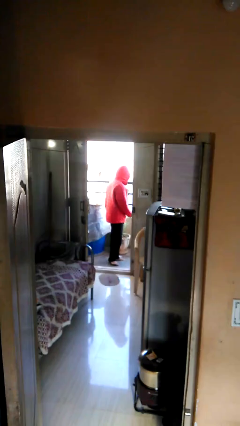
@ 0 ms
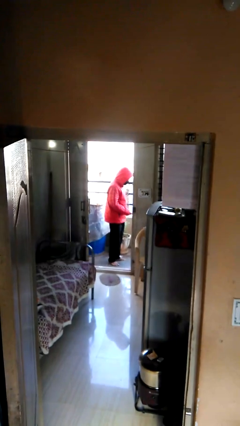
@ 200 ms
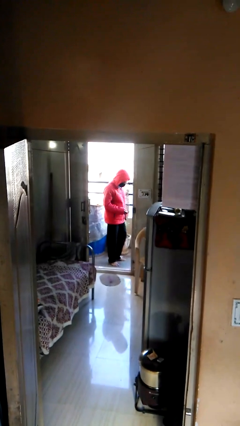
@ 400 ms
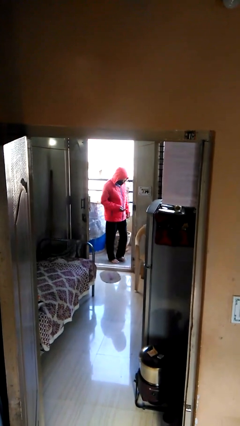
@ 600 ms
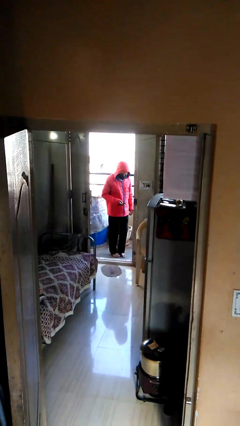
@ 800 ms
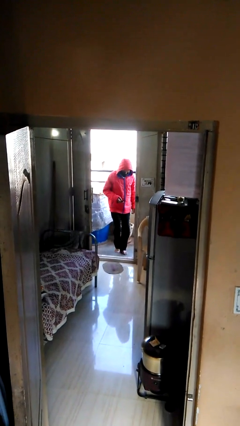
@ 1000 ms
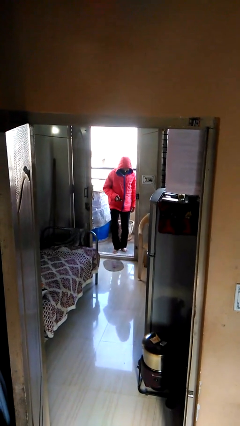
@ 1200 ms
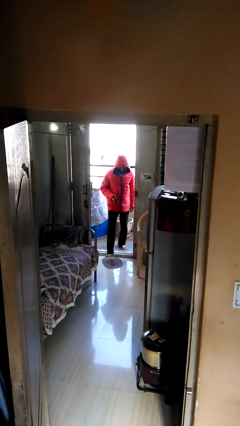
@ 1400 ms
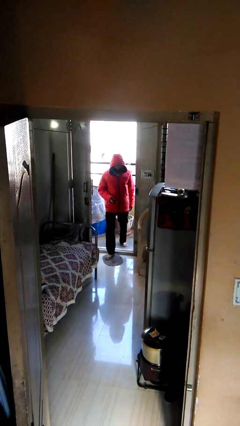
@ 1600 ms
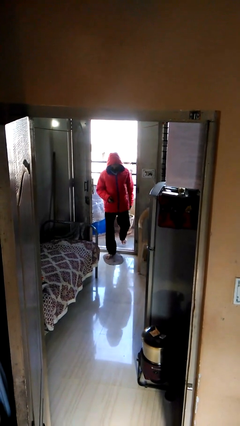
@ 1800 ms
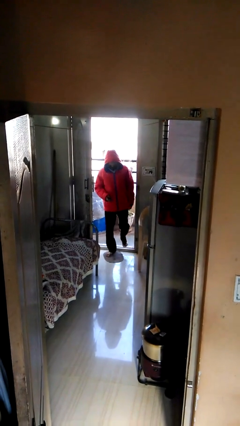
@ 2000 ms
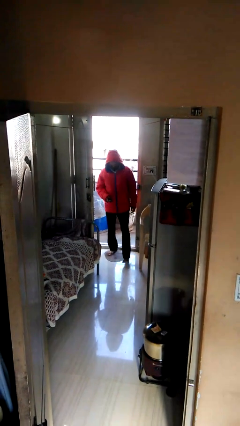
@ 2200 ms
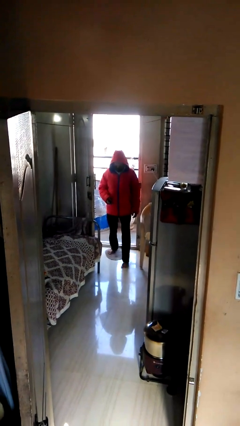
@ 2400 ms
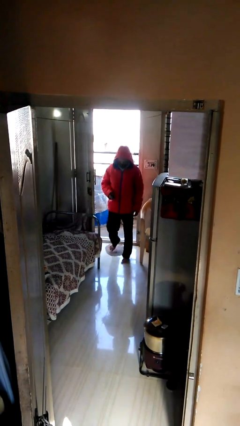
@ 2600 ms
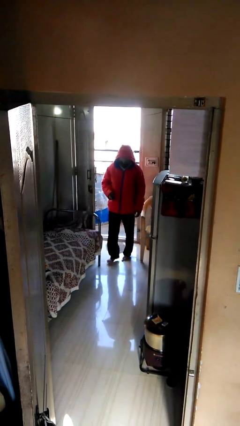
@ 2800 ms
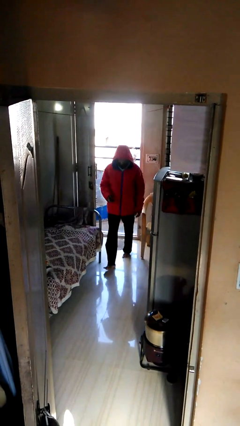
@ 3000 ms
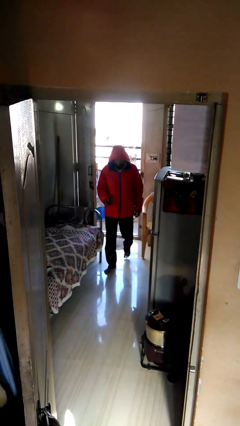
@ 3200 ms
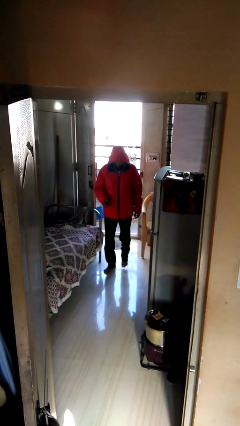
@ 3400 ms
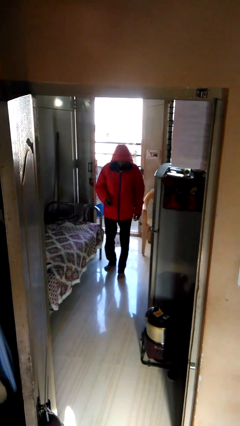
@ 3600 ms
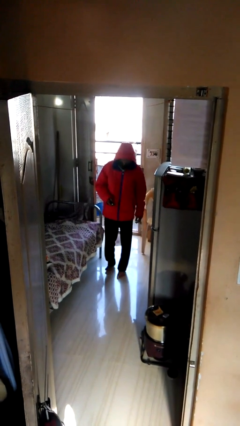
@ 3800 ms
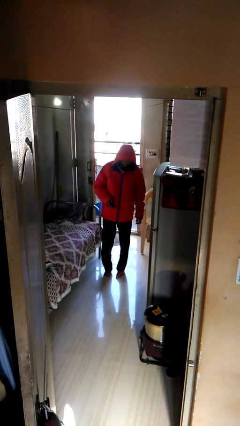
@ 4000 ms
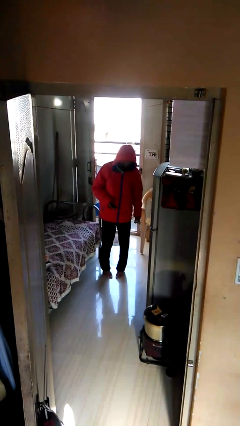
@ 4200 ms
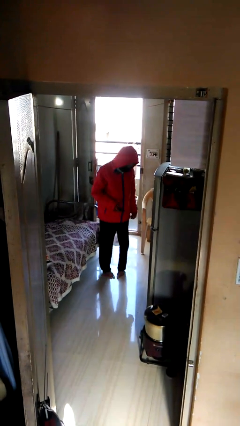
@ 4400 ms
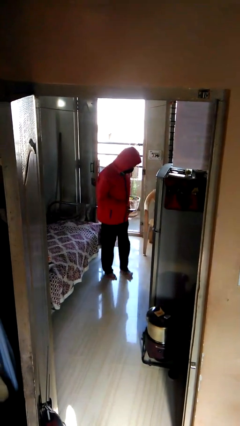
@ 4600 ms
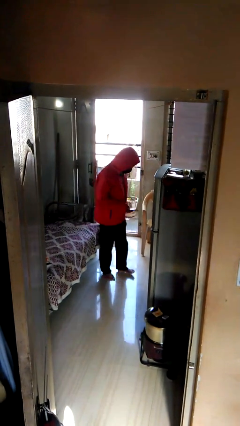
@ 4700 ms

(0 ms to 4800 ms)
person enters scene through structure

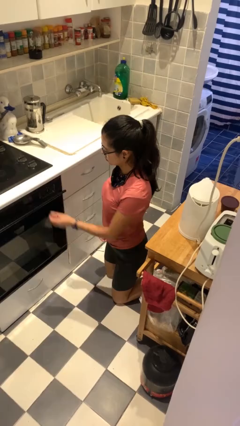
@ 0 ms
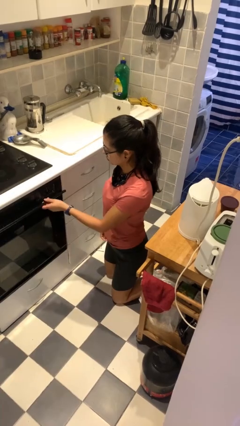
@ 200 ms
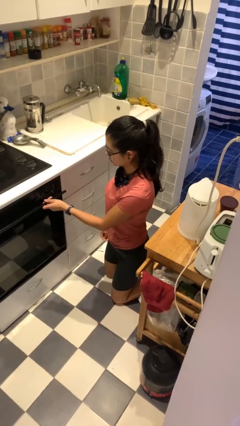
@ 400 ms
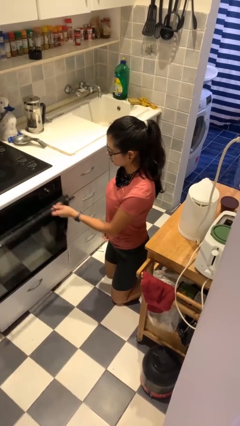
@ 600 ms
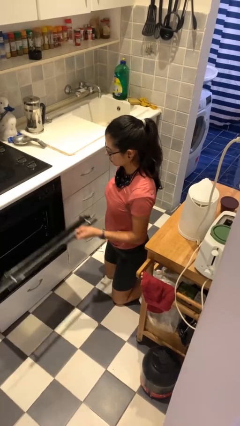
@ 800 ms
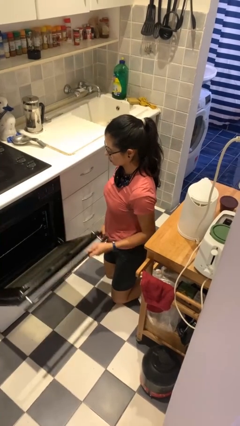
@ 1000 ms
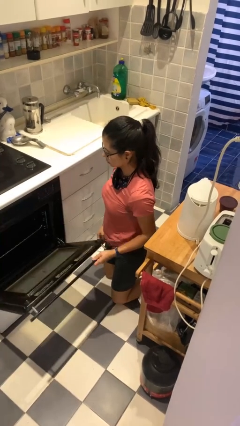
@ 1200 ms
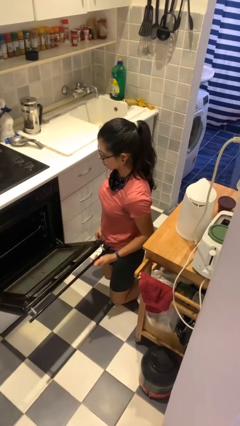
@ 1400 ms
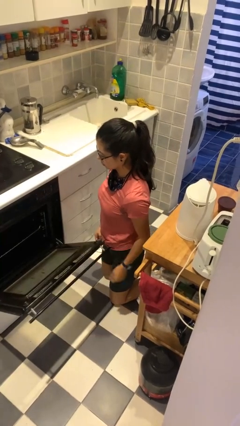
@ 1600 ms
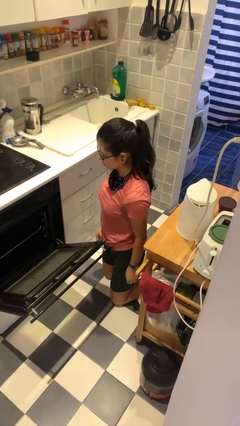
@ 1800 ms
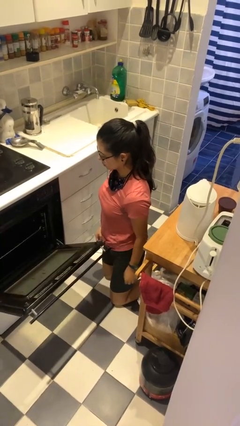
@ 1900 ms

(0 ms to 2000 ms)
person opens oven door

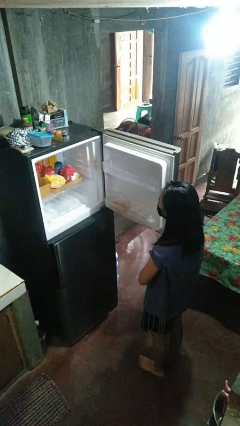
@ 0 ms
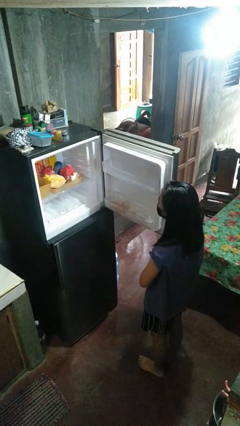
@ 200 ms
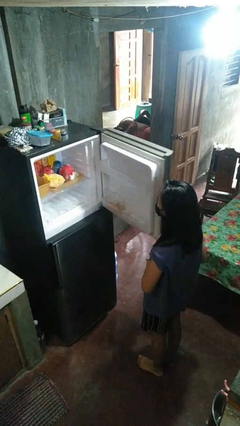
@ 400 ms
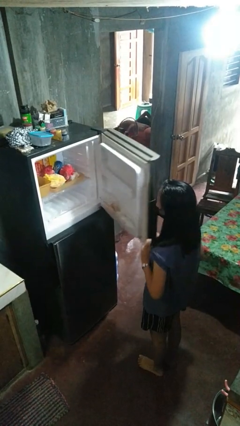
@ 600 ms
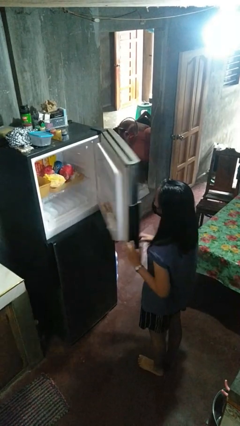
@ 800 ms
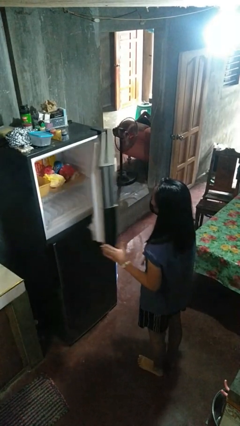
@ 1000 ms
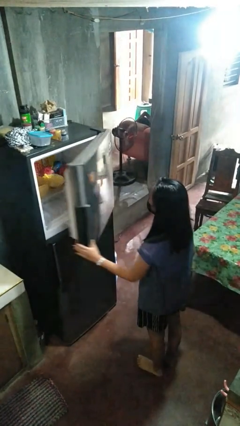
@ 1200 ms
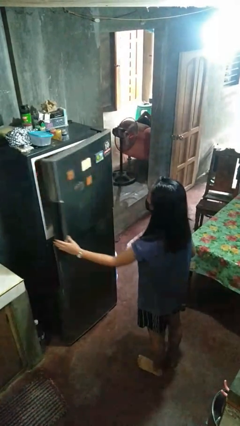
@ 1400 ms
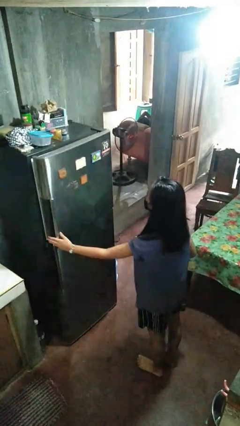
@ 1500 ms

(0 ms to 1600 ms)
person closes refrigerator

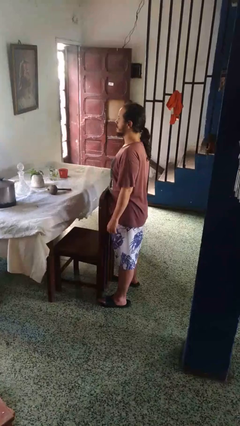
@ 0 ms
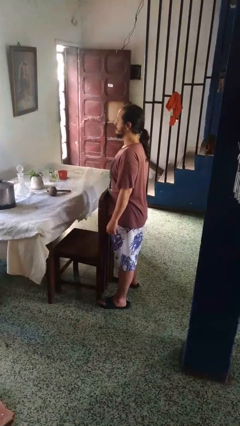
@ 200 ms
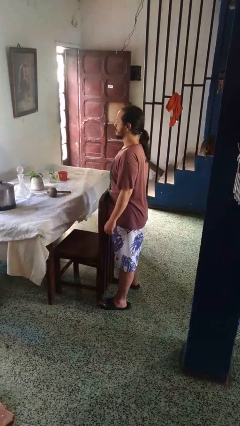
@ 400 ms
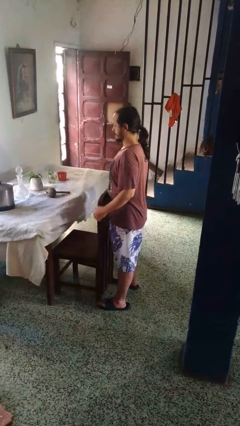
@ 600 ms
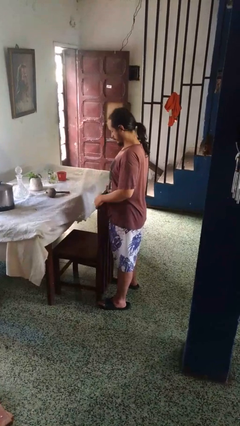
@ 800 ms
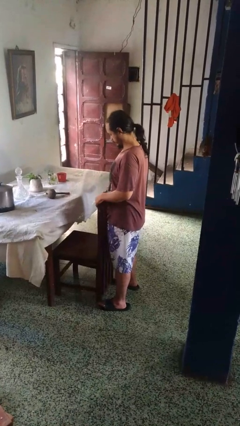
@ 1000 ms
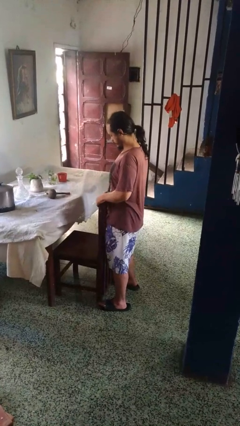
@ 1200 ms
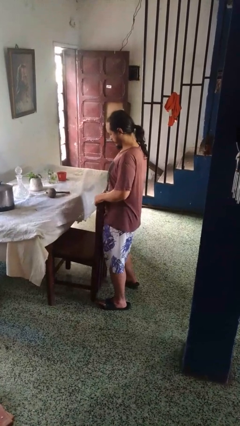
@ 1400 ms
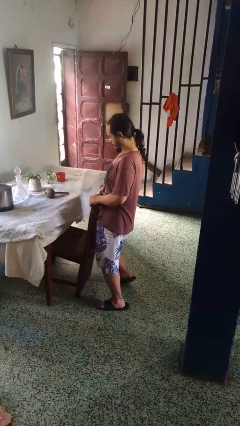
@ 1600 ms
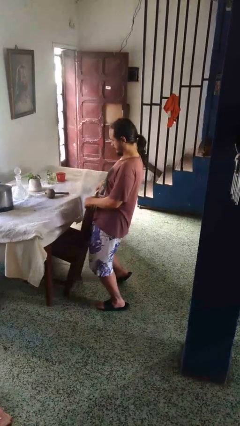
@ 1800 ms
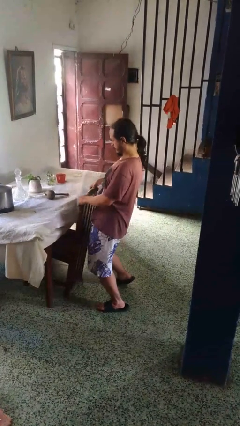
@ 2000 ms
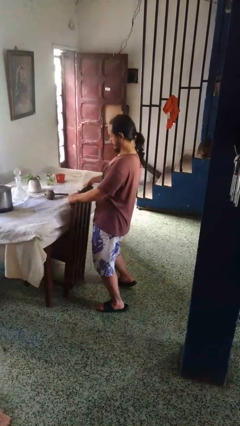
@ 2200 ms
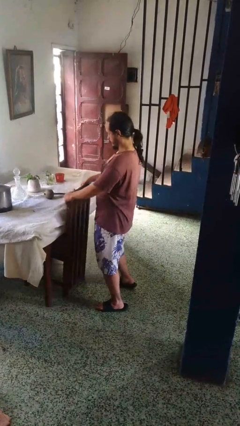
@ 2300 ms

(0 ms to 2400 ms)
person pushes in chair

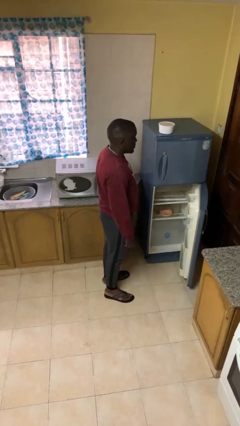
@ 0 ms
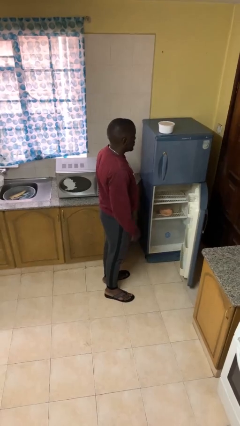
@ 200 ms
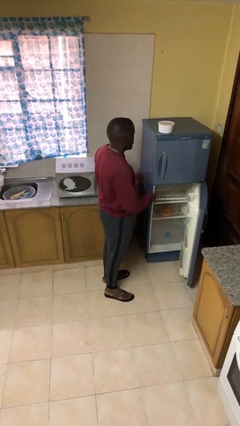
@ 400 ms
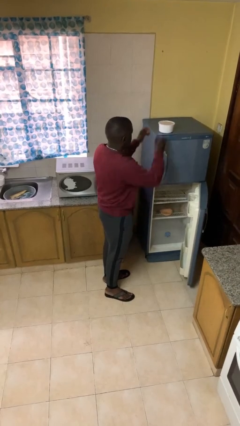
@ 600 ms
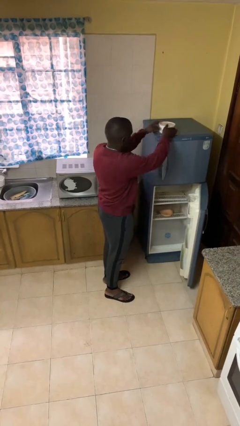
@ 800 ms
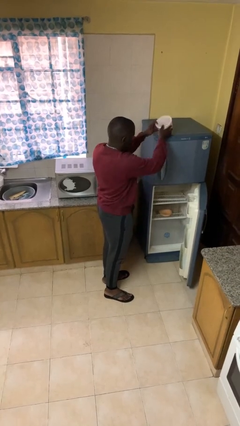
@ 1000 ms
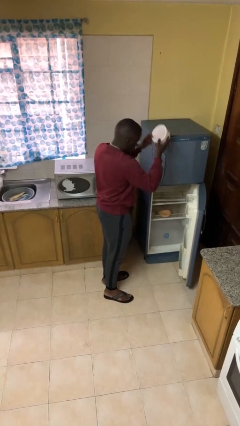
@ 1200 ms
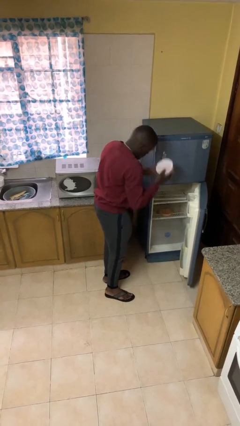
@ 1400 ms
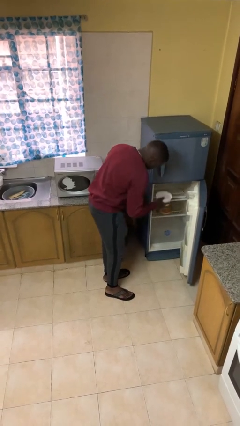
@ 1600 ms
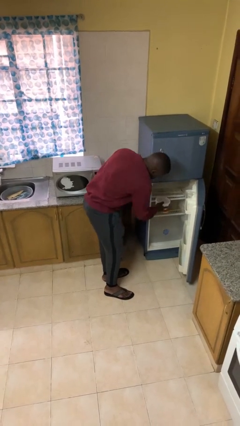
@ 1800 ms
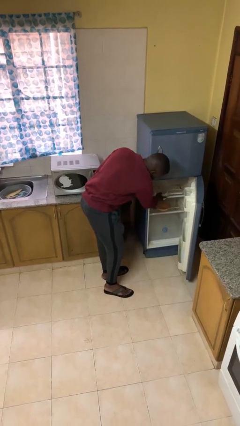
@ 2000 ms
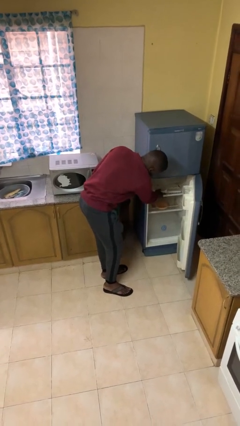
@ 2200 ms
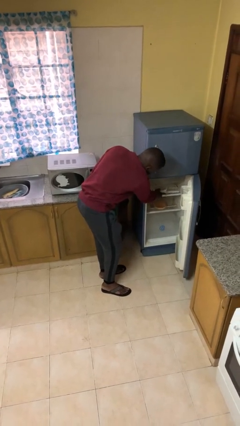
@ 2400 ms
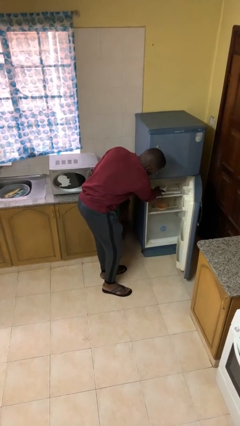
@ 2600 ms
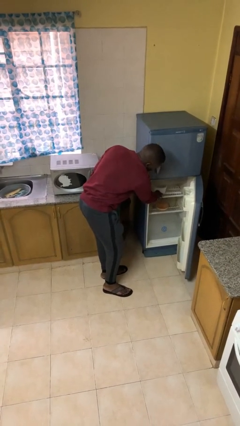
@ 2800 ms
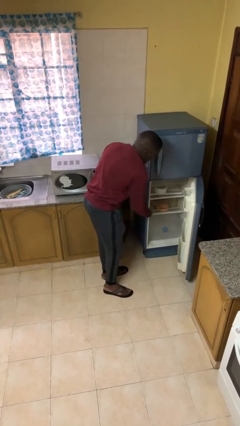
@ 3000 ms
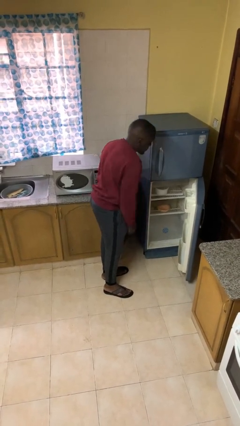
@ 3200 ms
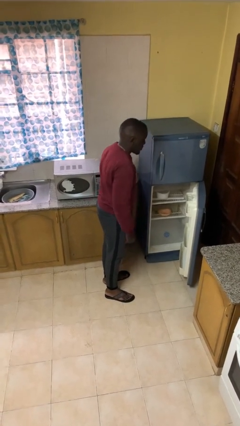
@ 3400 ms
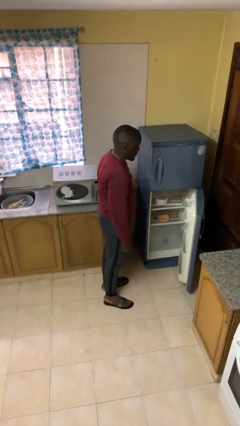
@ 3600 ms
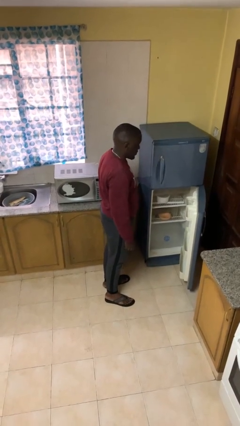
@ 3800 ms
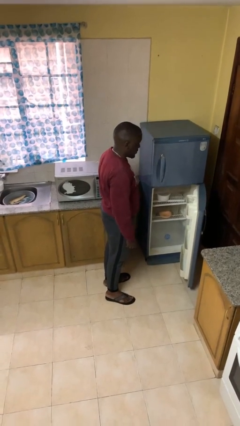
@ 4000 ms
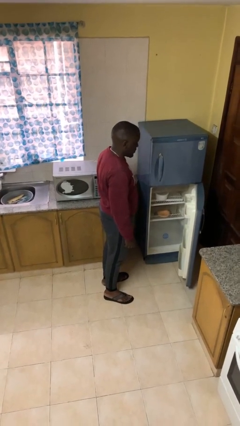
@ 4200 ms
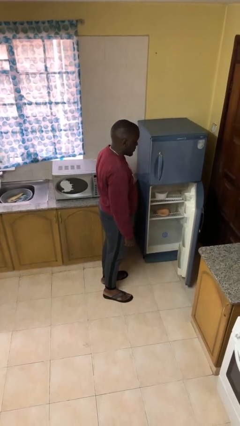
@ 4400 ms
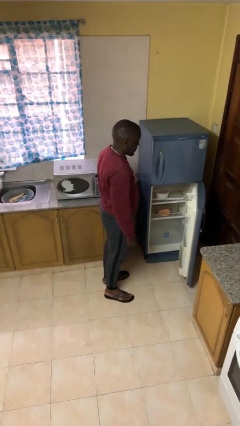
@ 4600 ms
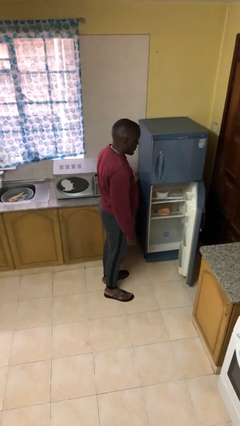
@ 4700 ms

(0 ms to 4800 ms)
person puts object into refrigerator

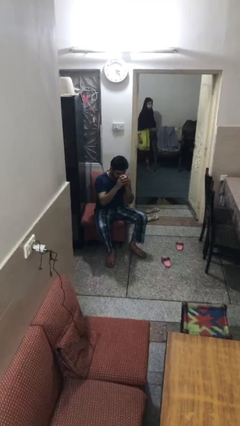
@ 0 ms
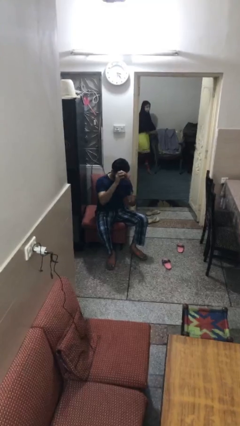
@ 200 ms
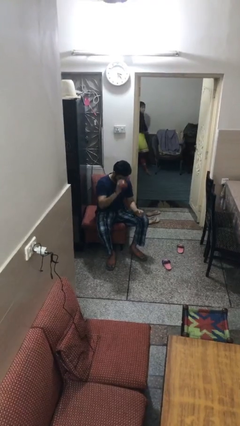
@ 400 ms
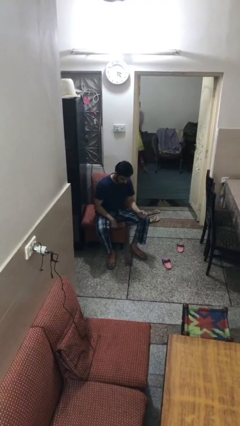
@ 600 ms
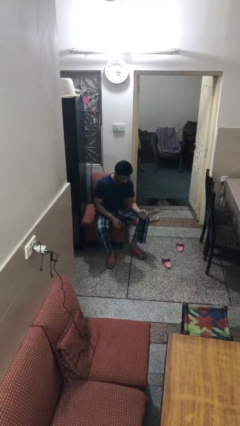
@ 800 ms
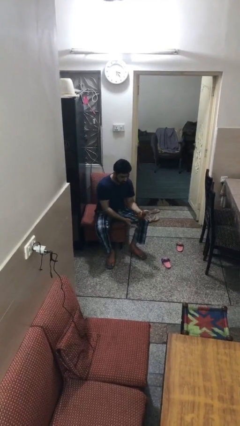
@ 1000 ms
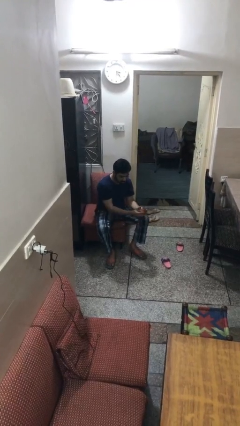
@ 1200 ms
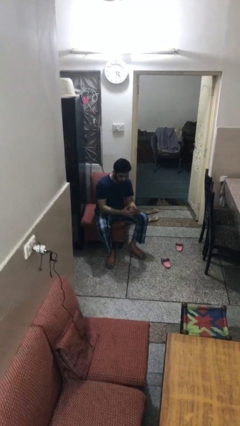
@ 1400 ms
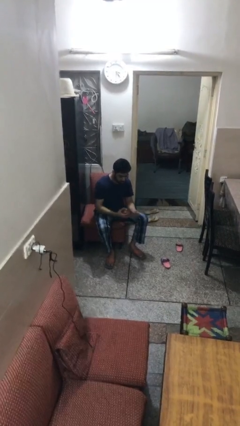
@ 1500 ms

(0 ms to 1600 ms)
person bounces ball on floor

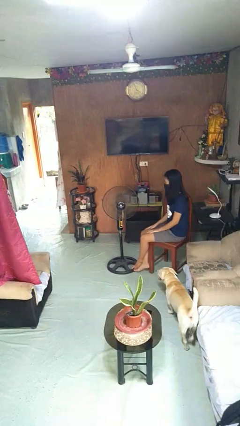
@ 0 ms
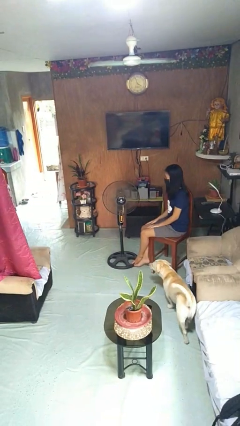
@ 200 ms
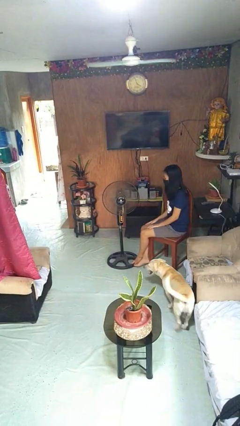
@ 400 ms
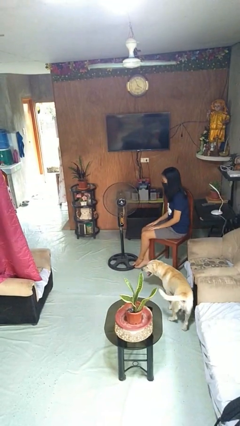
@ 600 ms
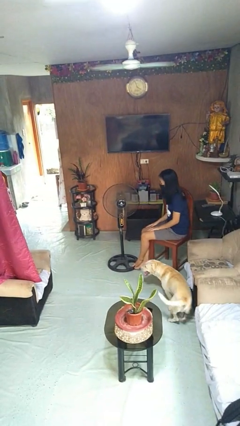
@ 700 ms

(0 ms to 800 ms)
person turns off fan
